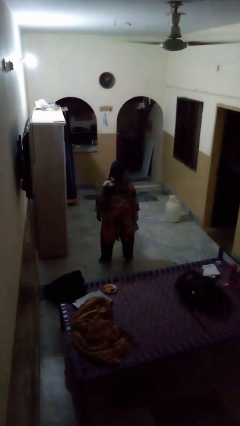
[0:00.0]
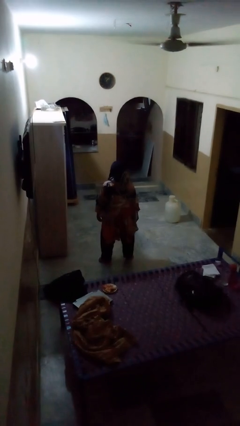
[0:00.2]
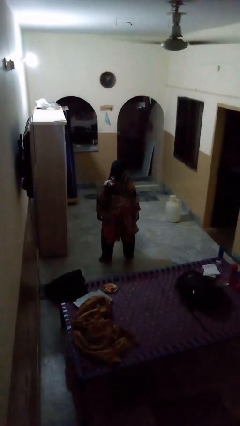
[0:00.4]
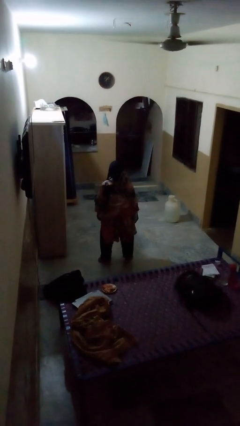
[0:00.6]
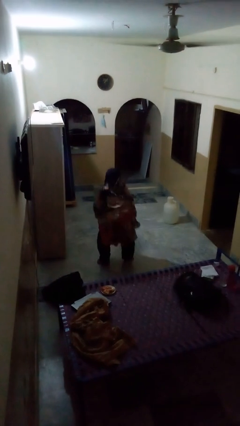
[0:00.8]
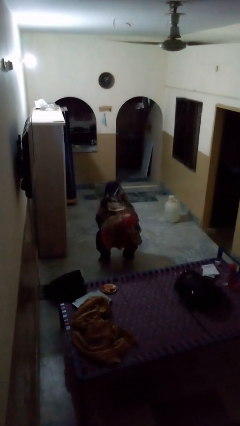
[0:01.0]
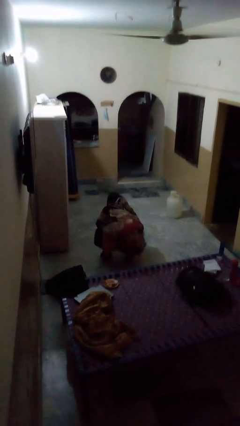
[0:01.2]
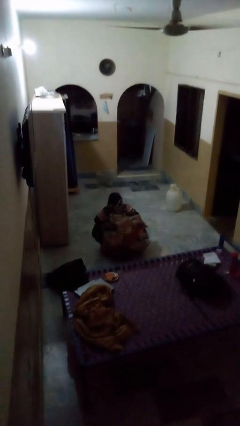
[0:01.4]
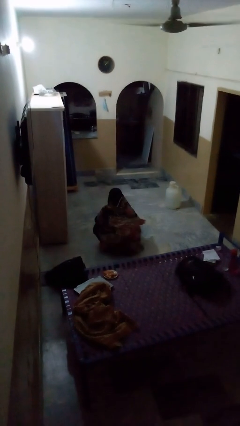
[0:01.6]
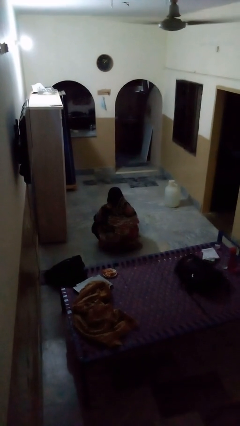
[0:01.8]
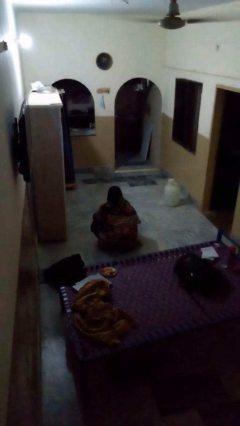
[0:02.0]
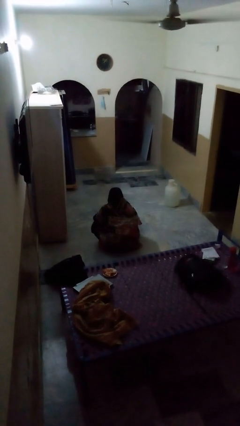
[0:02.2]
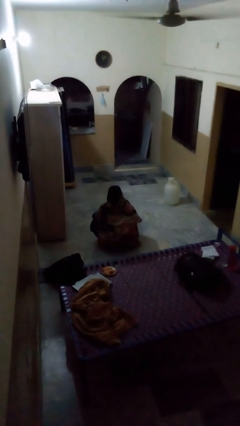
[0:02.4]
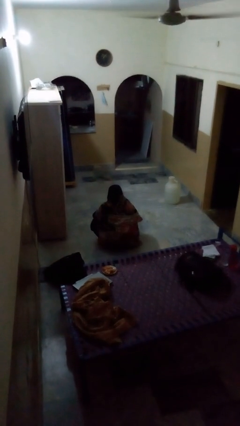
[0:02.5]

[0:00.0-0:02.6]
person squats

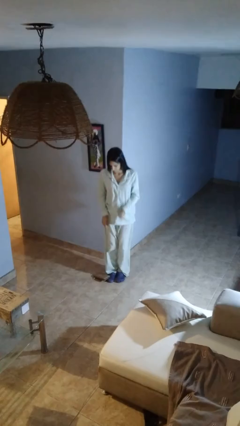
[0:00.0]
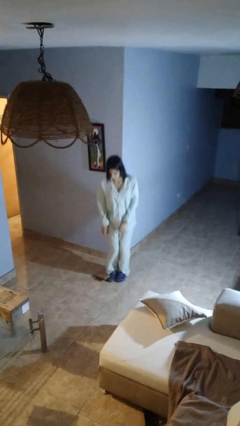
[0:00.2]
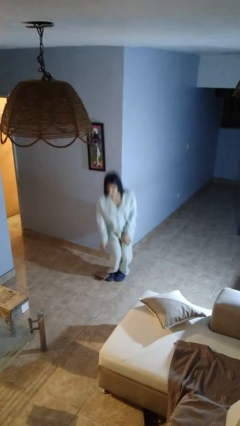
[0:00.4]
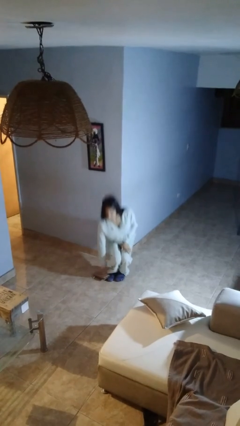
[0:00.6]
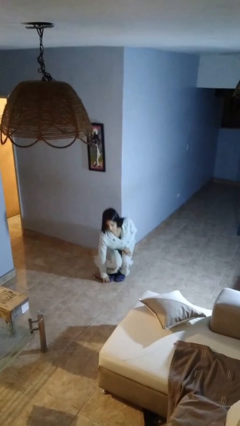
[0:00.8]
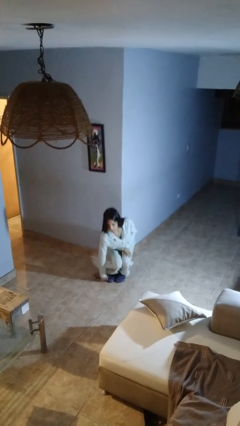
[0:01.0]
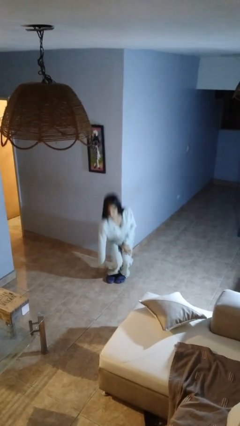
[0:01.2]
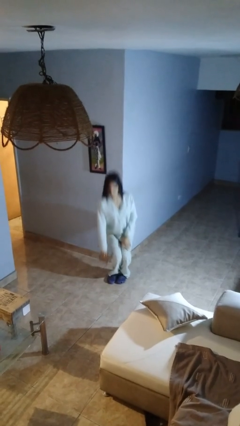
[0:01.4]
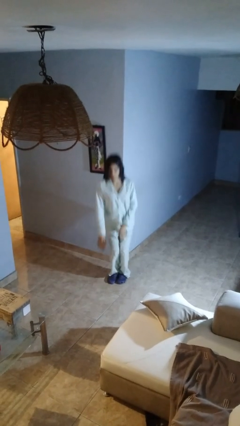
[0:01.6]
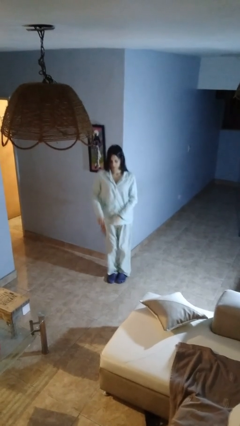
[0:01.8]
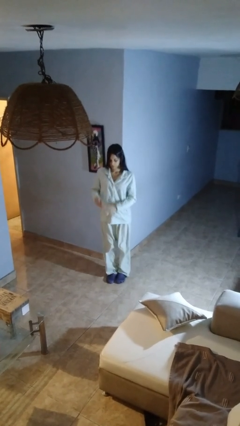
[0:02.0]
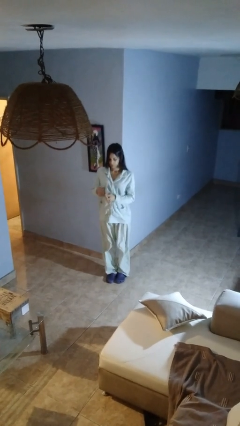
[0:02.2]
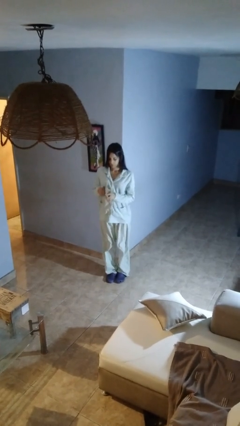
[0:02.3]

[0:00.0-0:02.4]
person picks up object from floor

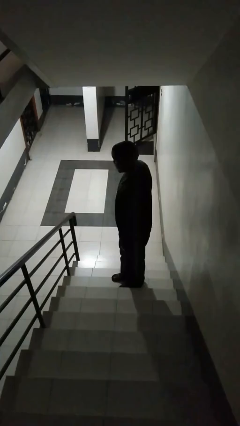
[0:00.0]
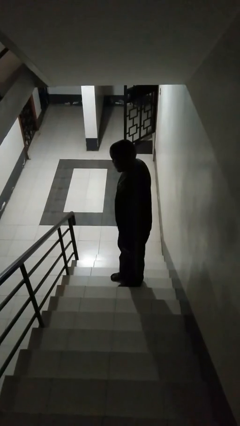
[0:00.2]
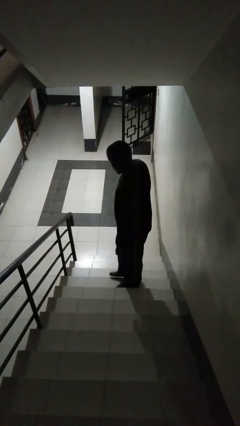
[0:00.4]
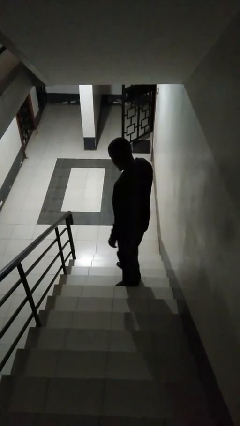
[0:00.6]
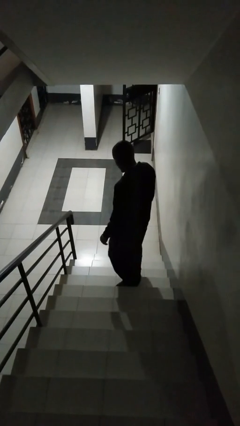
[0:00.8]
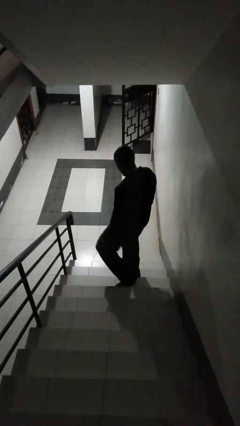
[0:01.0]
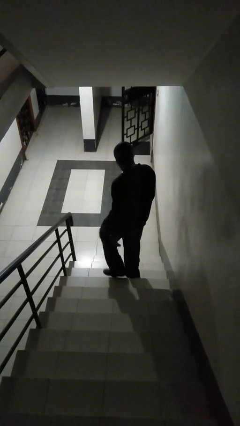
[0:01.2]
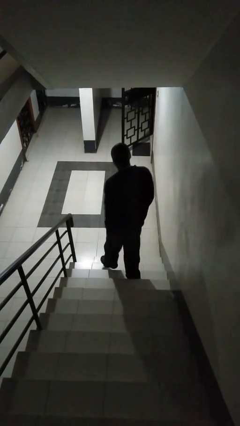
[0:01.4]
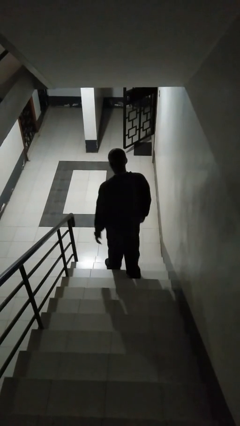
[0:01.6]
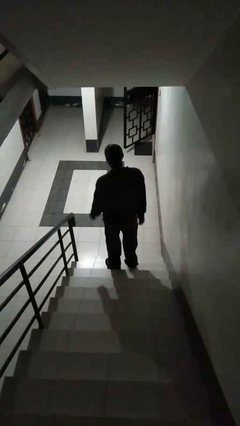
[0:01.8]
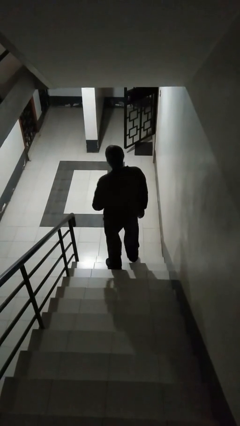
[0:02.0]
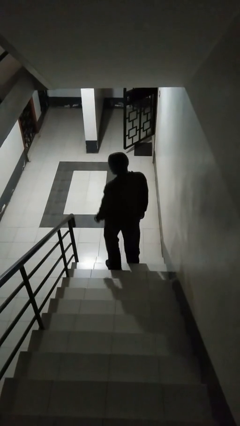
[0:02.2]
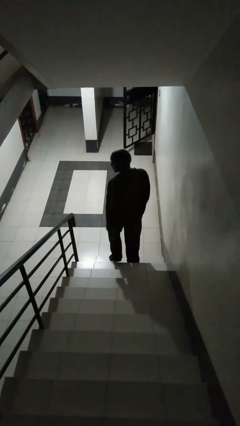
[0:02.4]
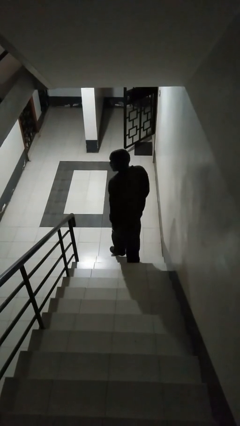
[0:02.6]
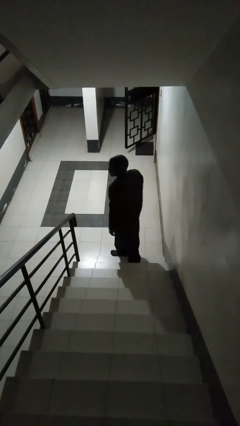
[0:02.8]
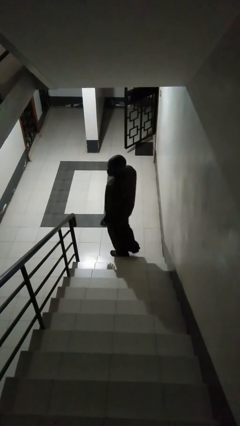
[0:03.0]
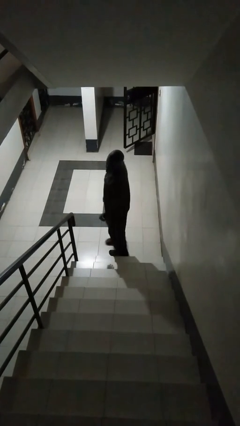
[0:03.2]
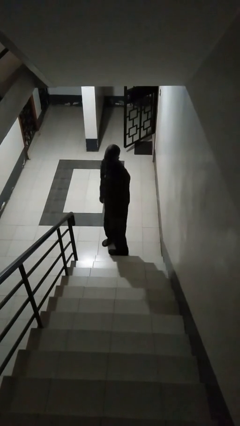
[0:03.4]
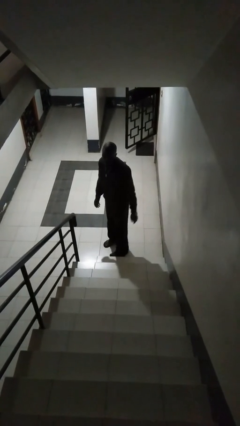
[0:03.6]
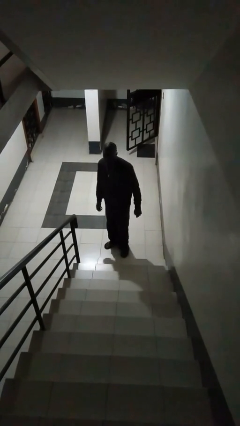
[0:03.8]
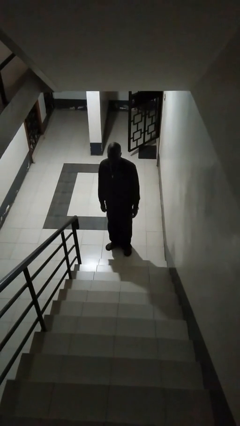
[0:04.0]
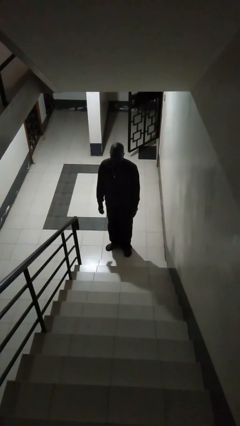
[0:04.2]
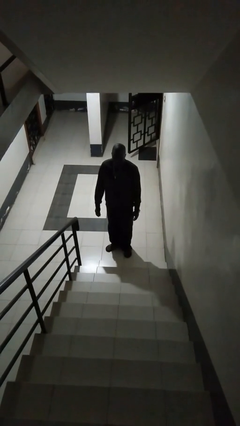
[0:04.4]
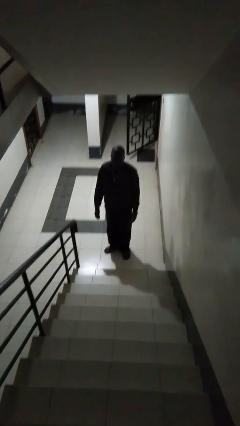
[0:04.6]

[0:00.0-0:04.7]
person climbs down stairs

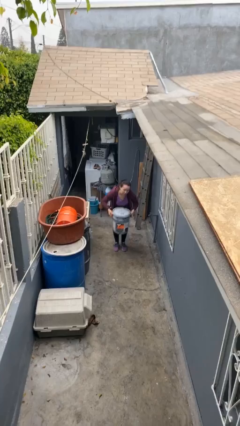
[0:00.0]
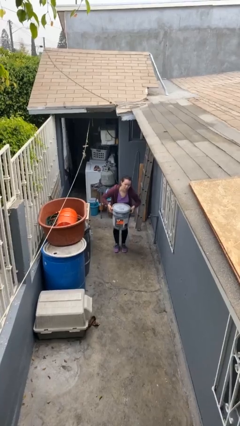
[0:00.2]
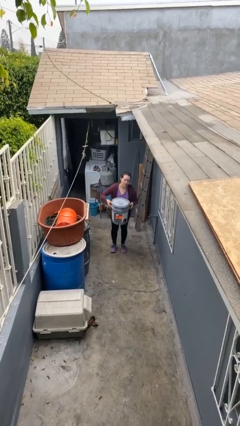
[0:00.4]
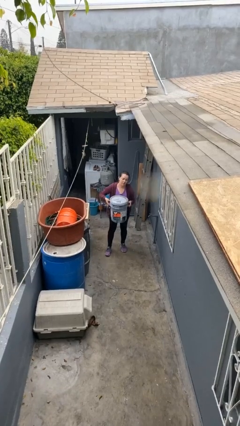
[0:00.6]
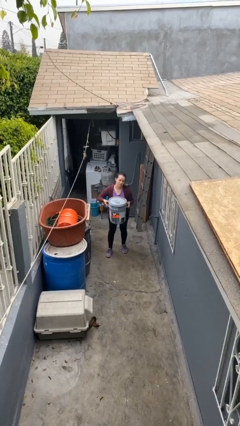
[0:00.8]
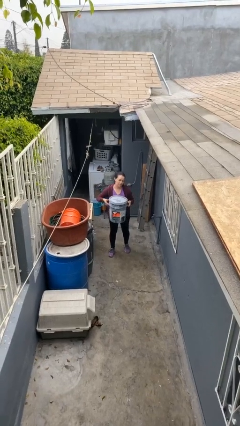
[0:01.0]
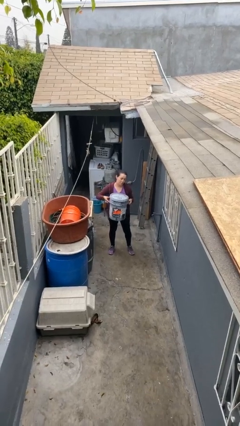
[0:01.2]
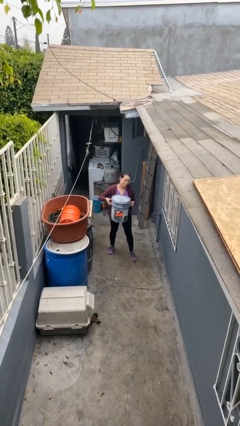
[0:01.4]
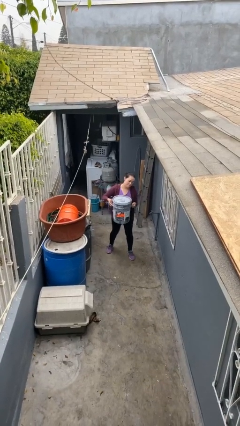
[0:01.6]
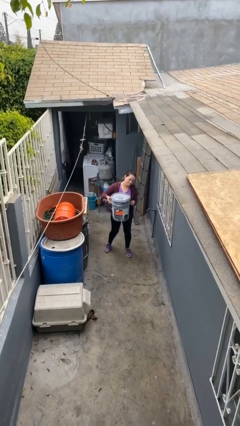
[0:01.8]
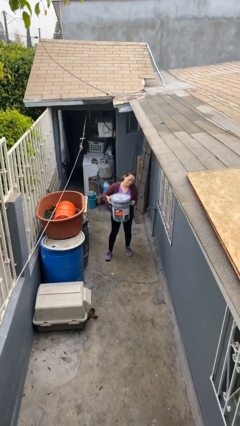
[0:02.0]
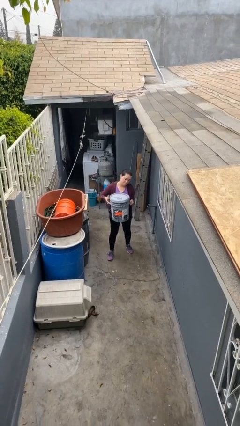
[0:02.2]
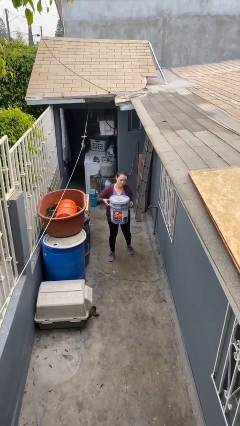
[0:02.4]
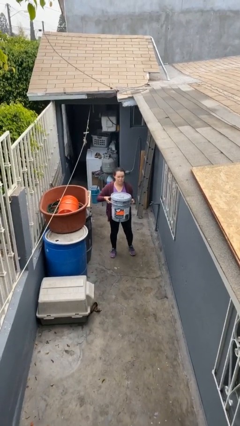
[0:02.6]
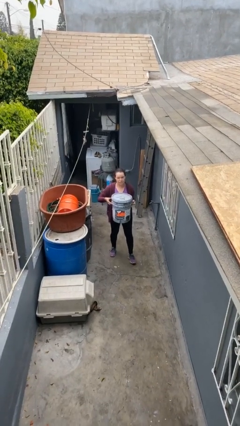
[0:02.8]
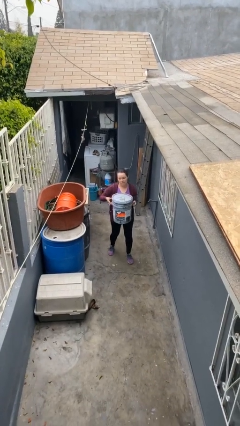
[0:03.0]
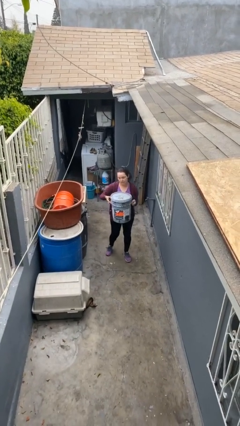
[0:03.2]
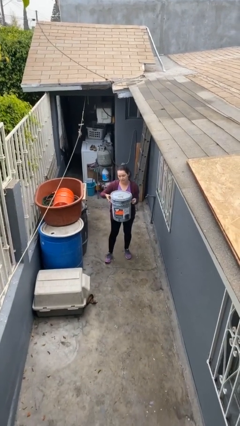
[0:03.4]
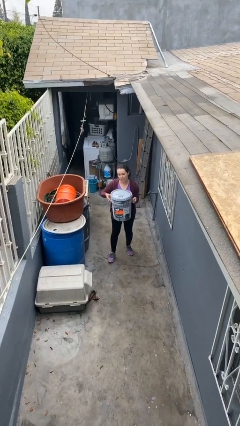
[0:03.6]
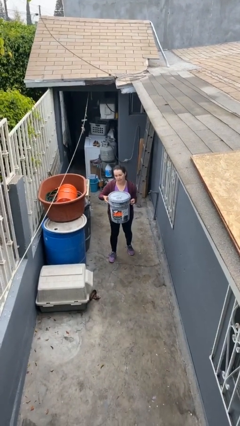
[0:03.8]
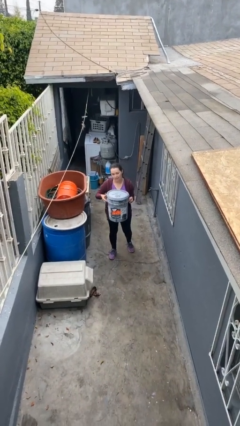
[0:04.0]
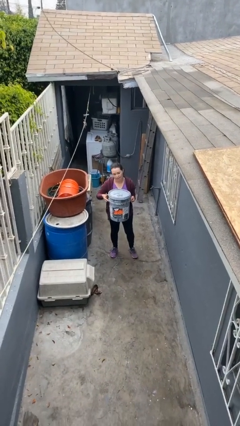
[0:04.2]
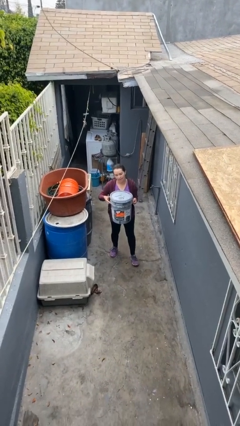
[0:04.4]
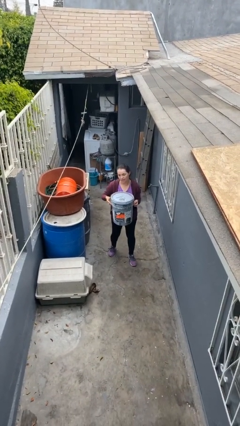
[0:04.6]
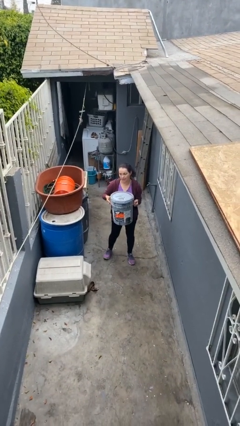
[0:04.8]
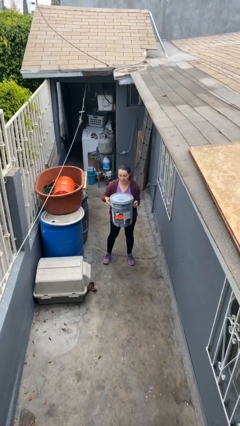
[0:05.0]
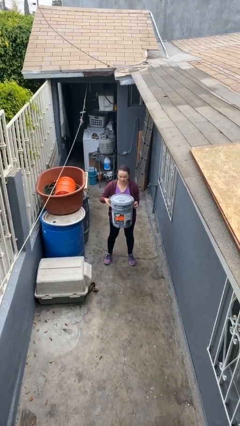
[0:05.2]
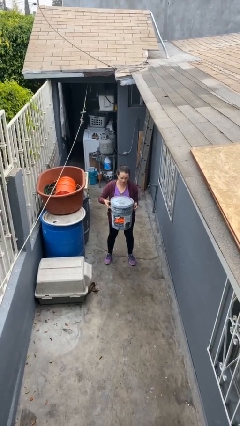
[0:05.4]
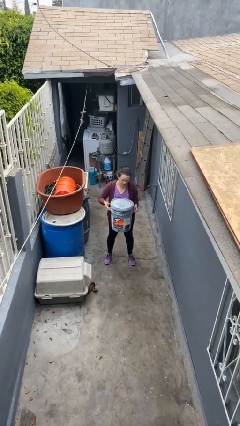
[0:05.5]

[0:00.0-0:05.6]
person carries heavy object

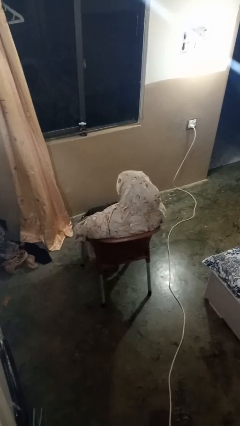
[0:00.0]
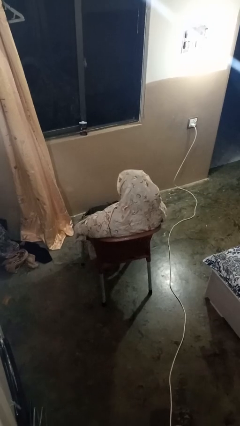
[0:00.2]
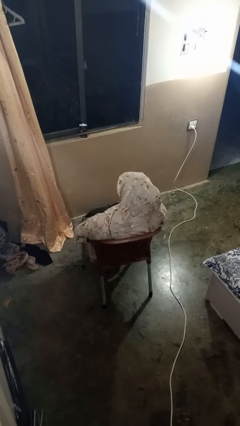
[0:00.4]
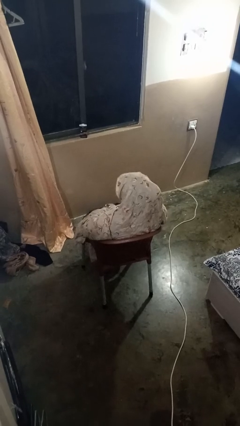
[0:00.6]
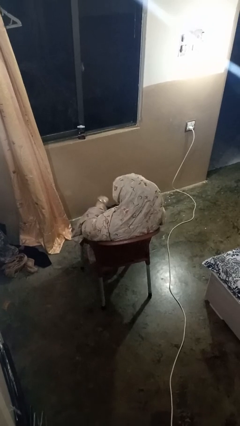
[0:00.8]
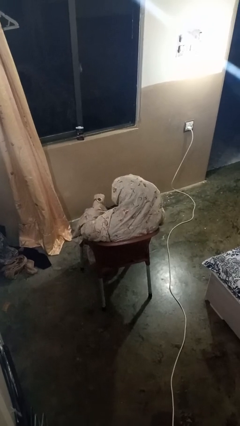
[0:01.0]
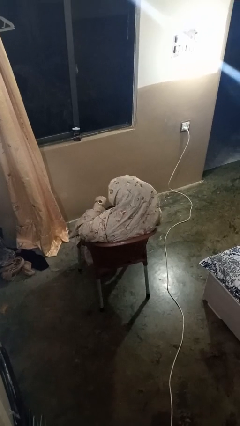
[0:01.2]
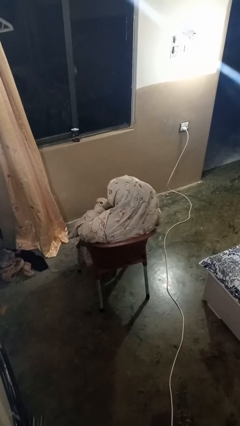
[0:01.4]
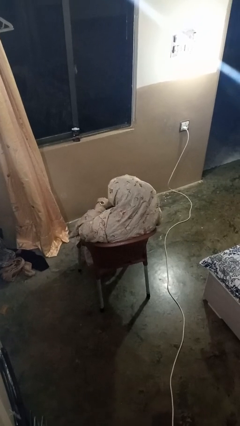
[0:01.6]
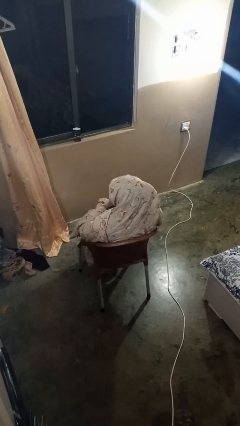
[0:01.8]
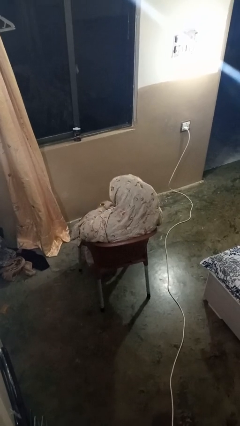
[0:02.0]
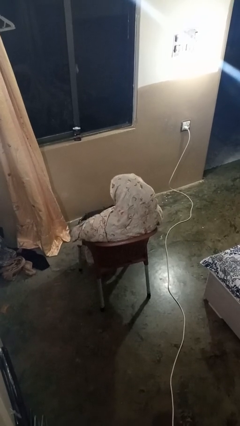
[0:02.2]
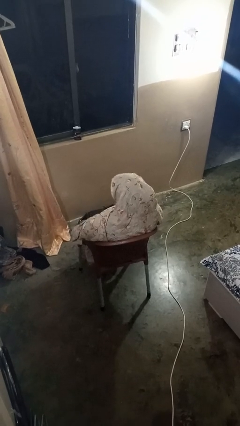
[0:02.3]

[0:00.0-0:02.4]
person looks at wristwatch
